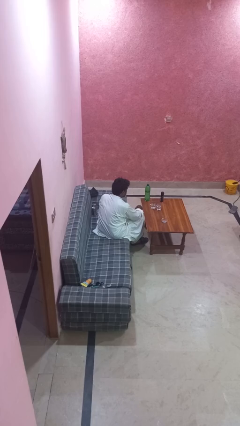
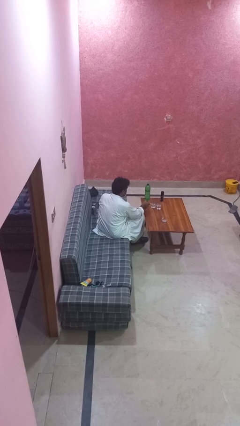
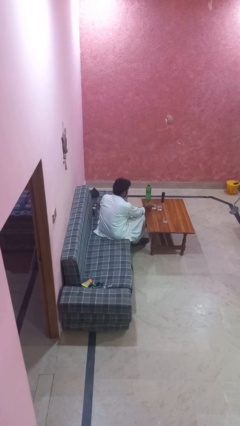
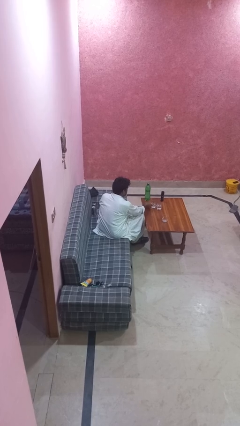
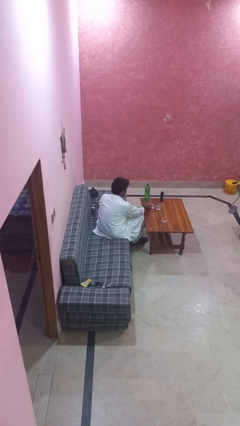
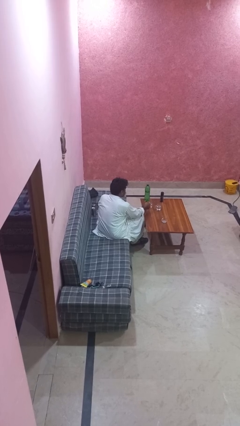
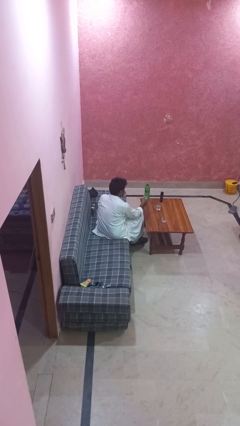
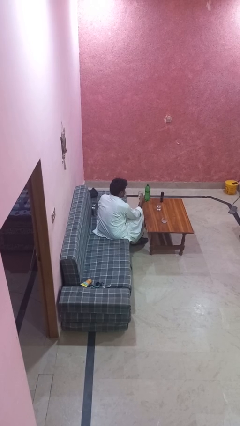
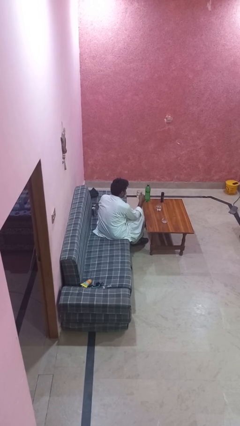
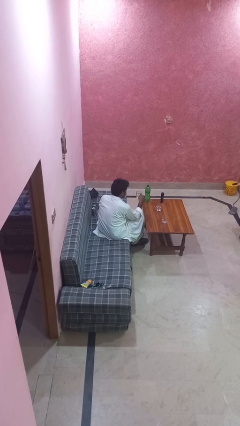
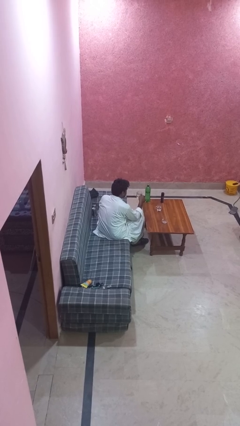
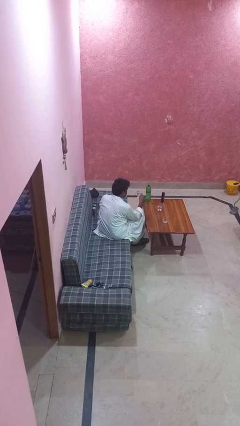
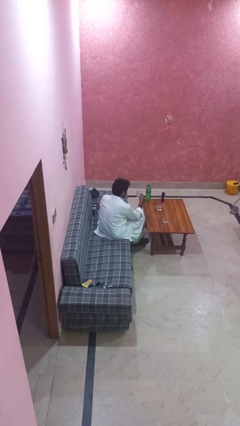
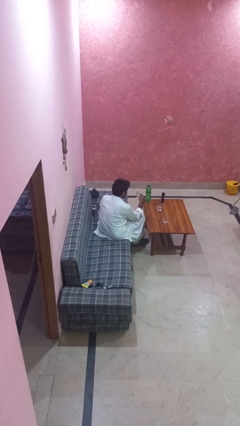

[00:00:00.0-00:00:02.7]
person picks up object from table

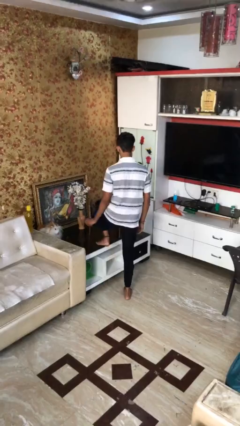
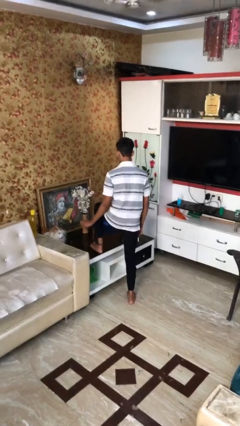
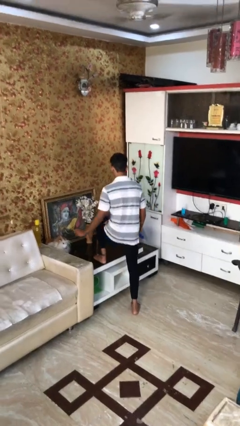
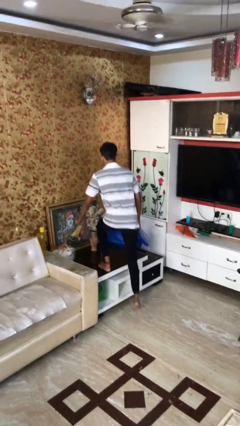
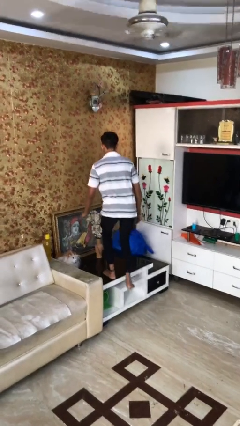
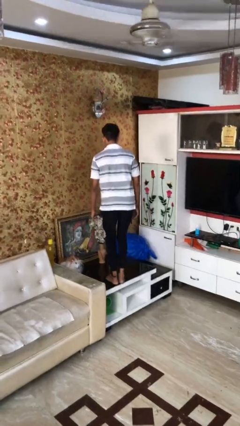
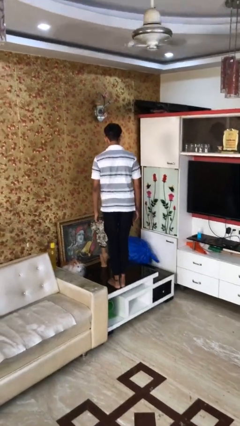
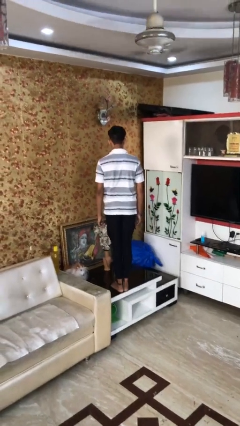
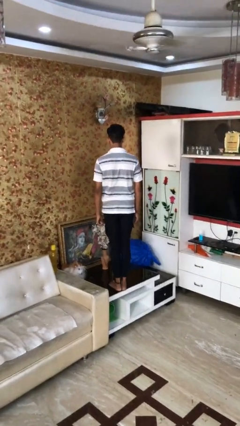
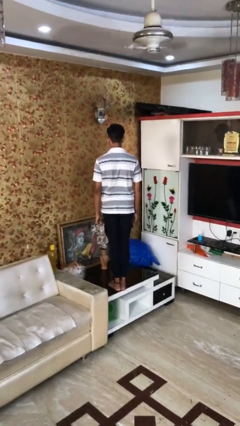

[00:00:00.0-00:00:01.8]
person climbs on table

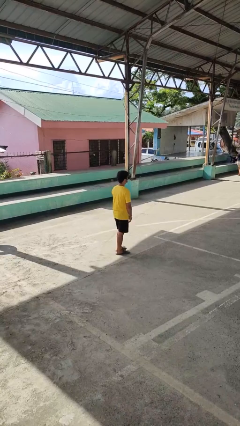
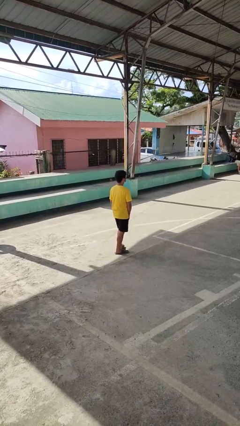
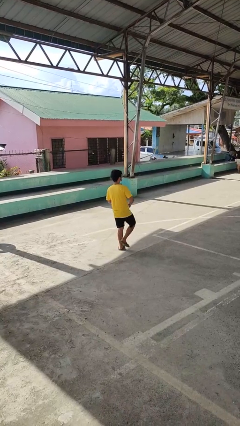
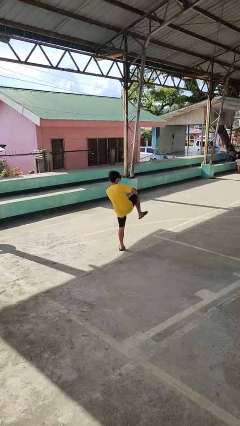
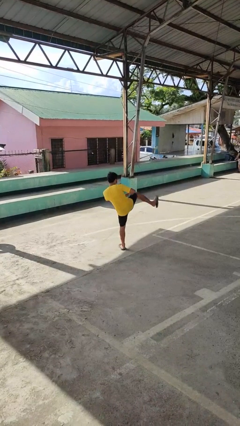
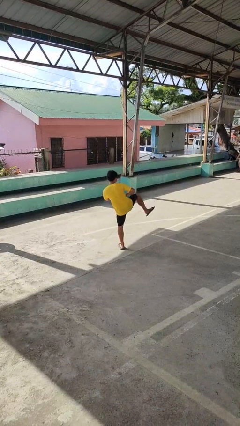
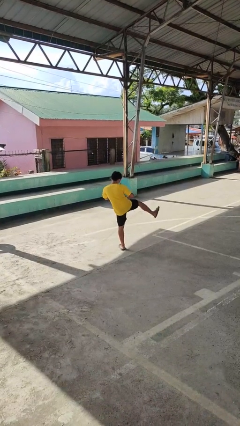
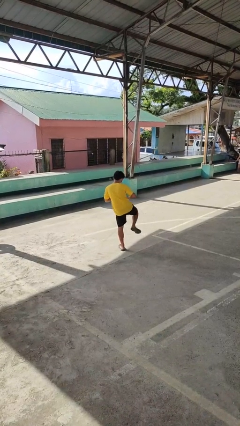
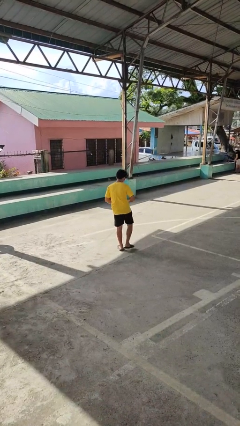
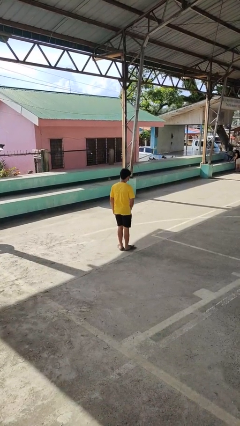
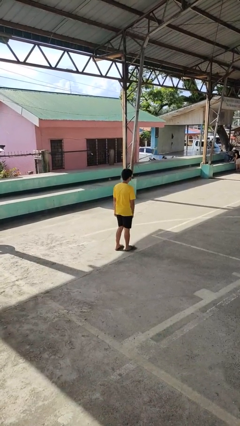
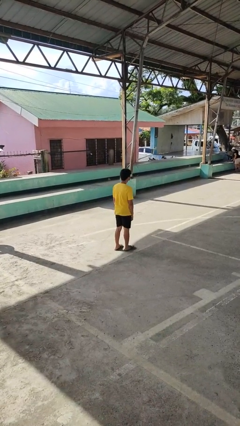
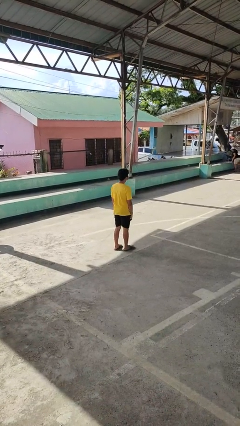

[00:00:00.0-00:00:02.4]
person karate kicks

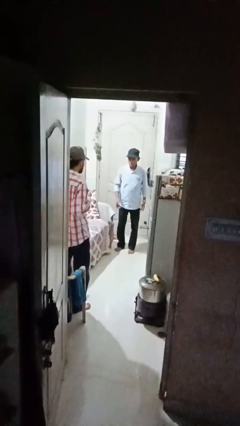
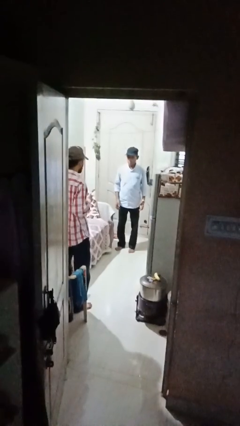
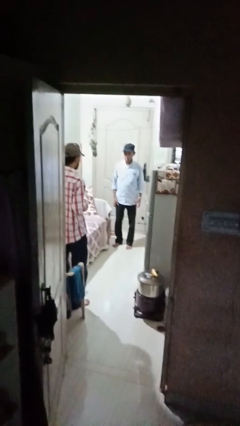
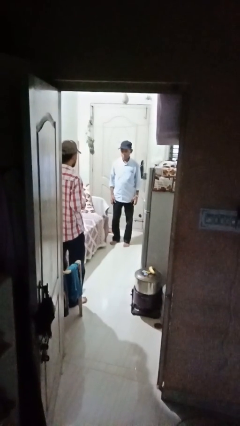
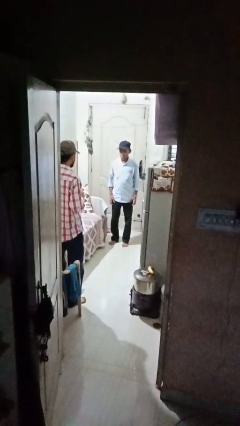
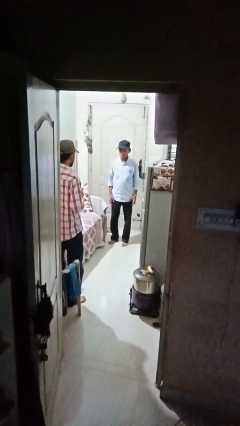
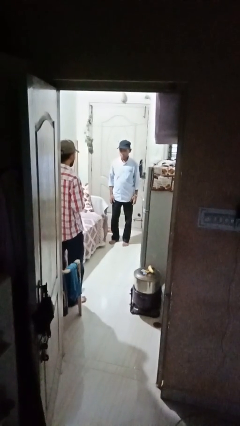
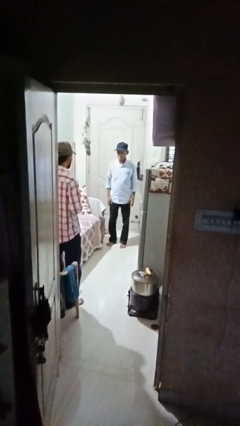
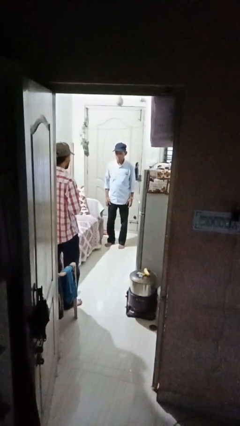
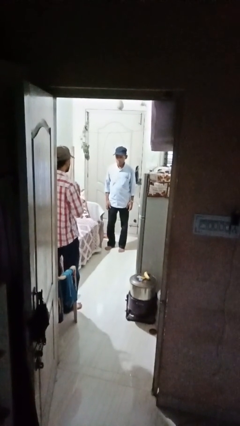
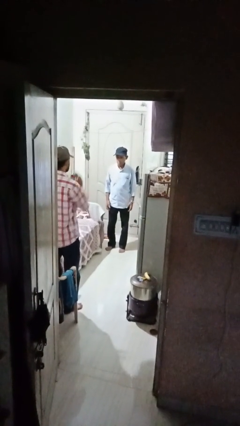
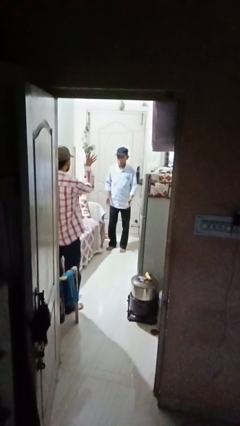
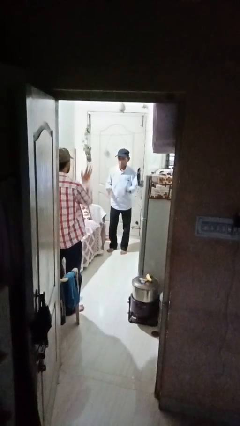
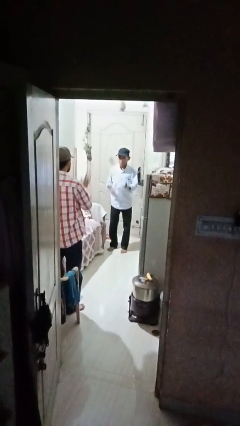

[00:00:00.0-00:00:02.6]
person throws object to person

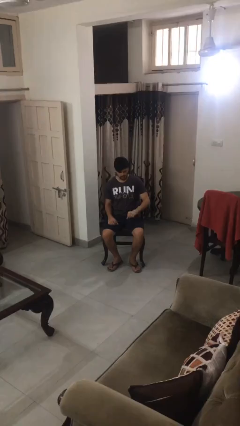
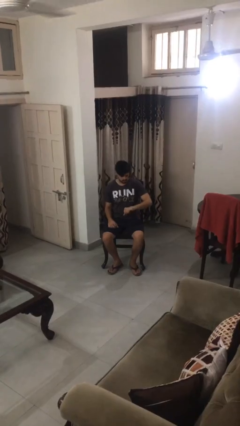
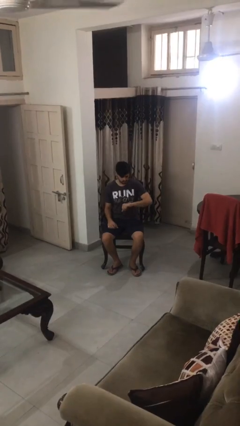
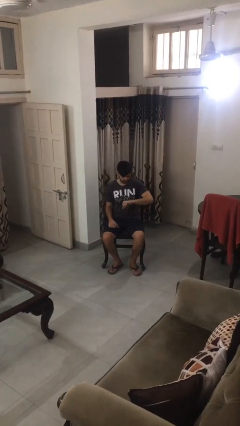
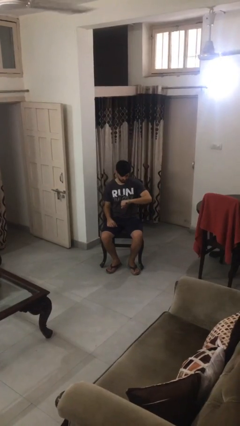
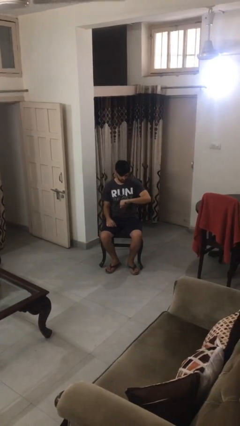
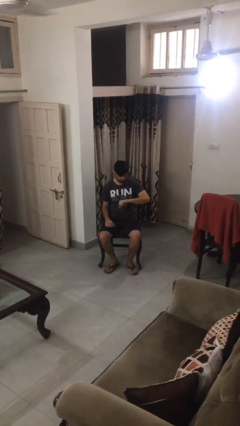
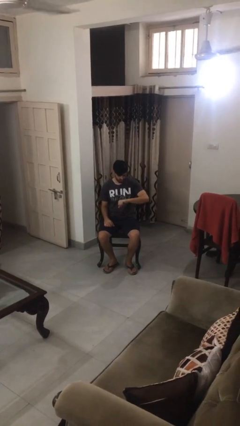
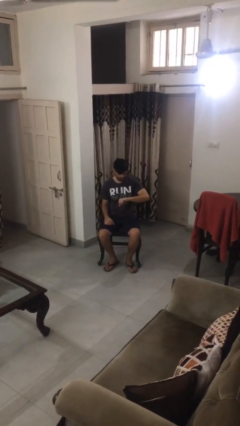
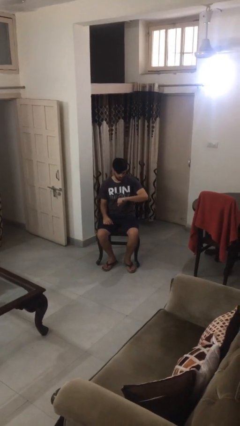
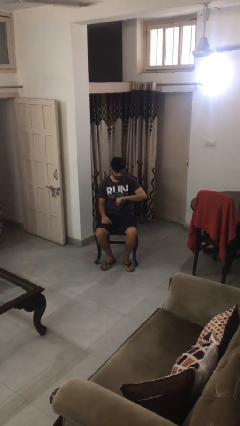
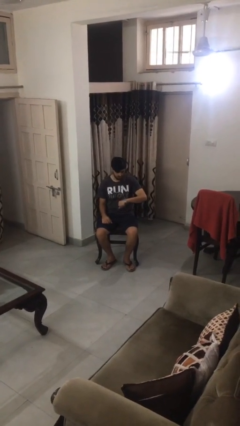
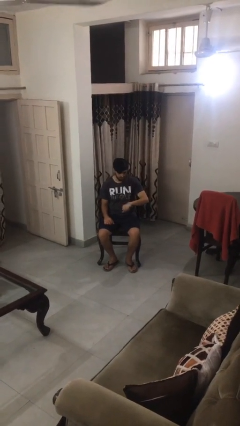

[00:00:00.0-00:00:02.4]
person looks at wristwatch

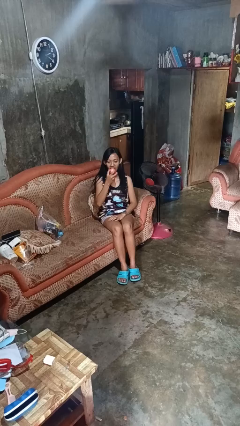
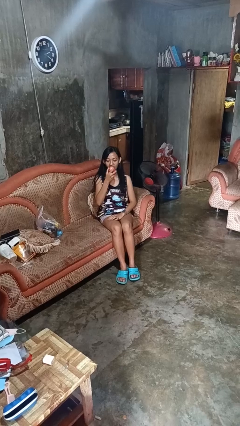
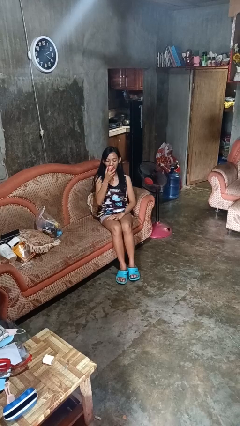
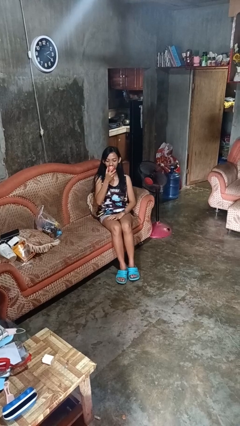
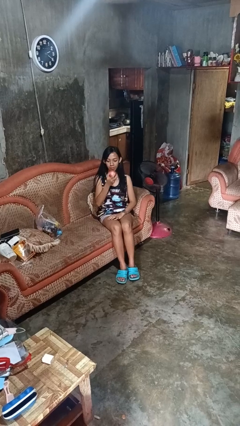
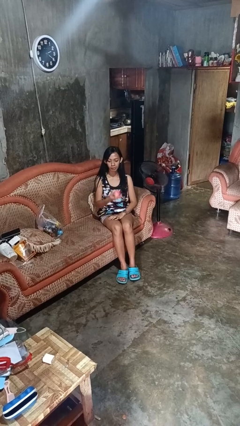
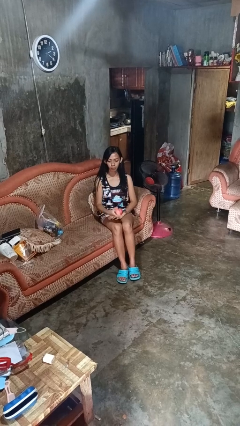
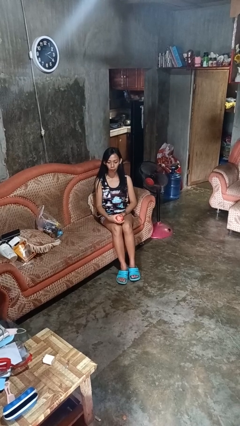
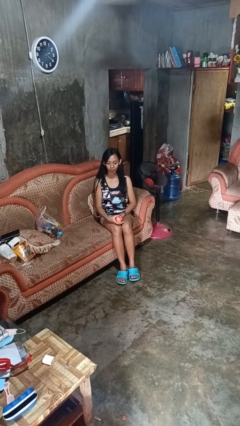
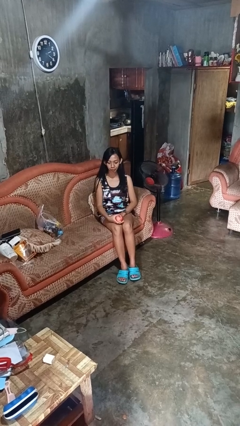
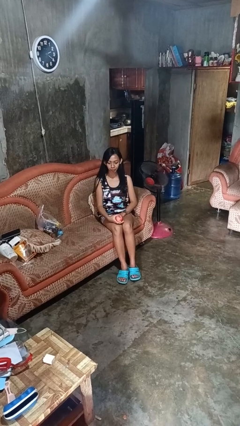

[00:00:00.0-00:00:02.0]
person eats apple

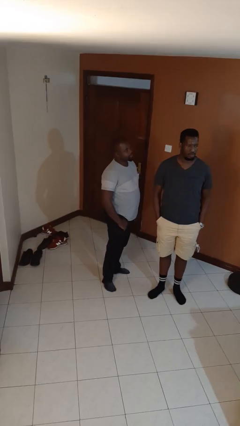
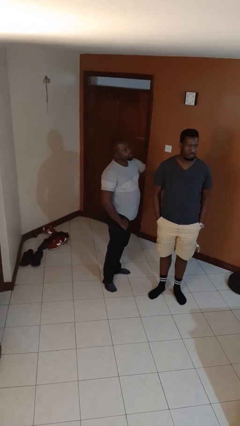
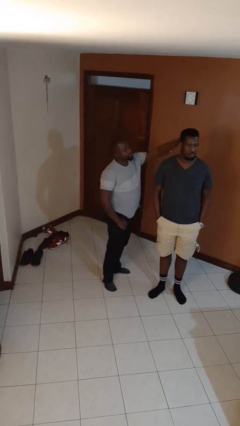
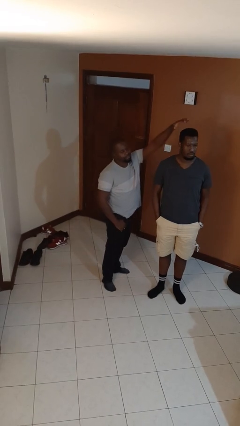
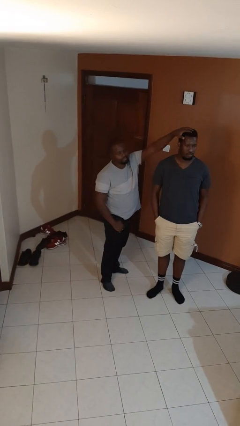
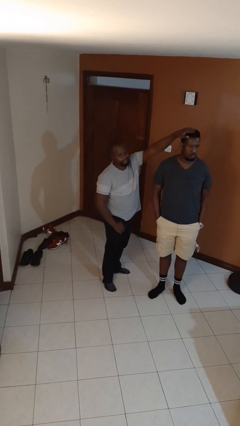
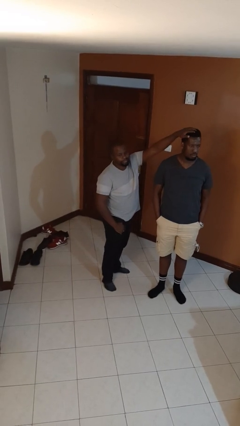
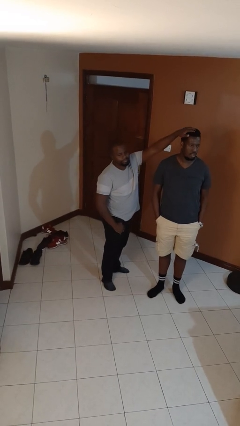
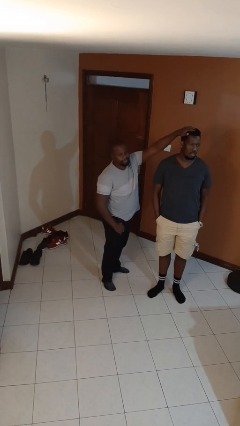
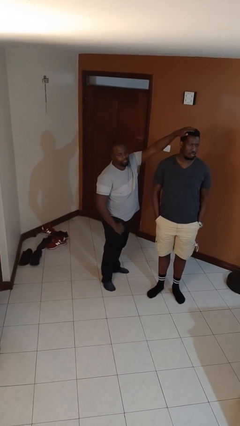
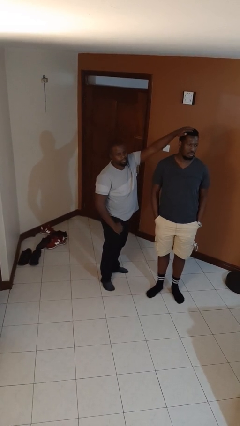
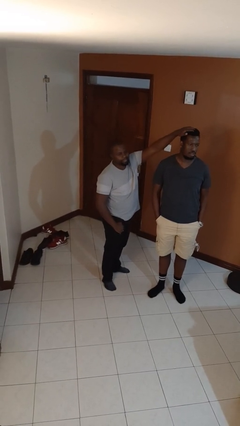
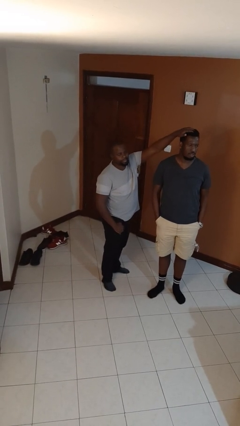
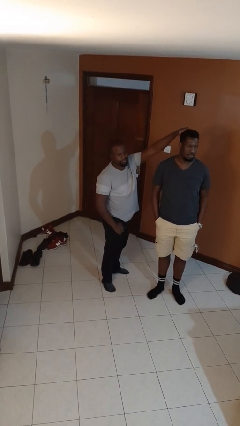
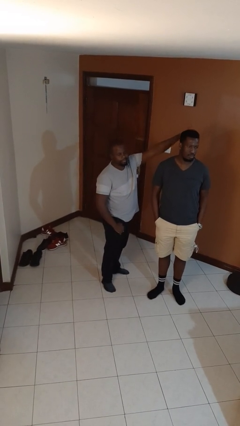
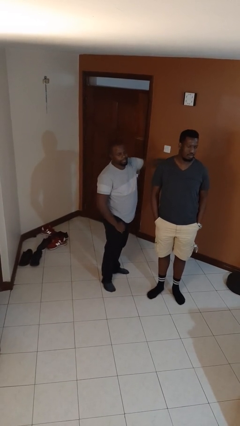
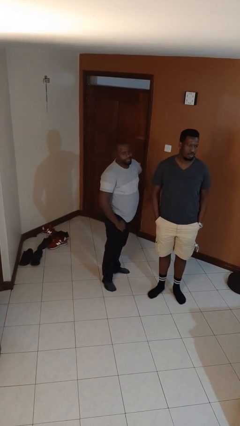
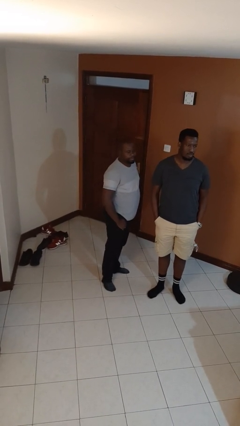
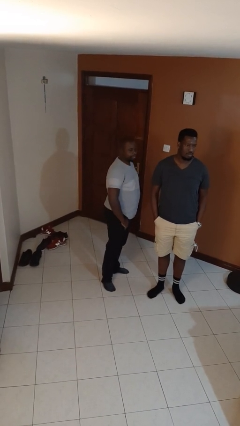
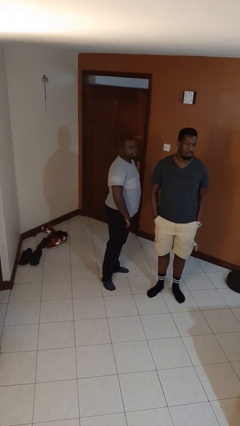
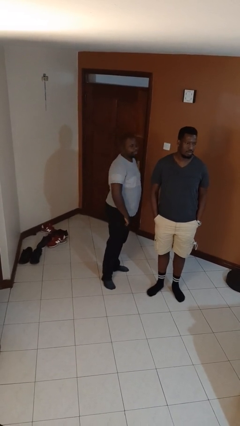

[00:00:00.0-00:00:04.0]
person grabs person by hair
